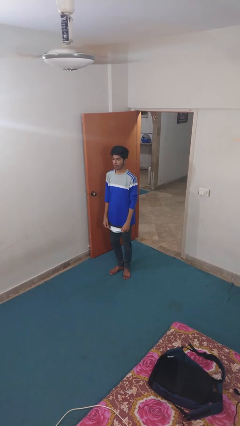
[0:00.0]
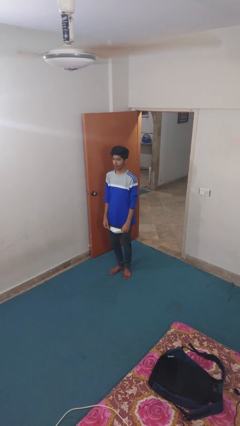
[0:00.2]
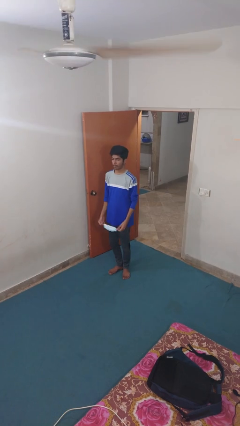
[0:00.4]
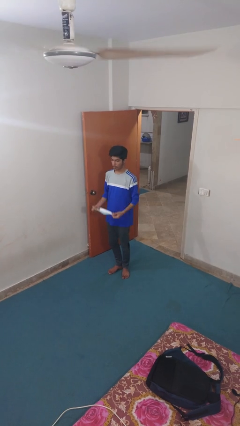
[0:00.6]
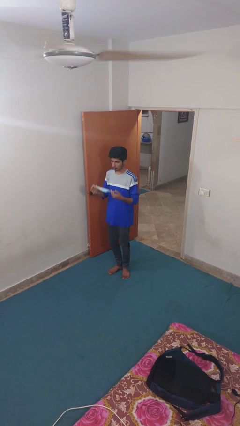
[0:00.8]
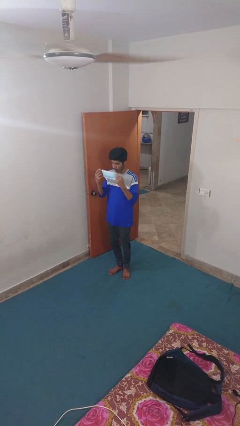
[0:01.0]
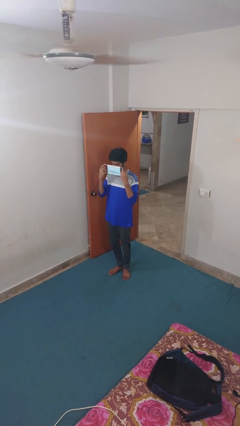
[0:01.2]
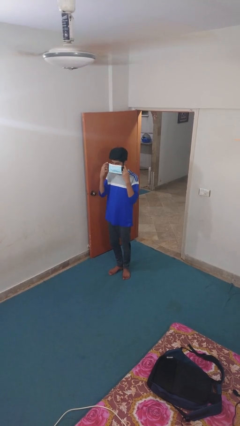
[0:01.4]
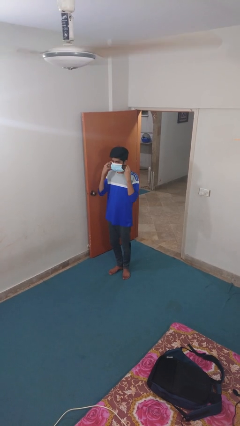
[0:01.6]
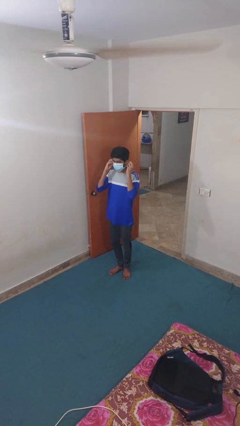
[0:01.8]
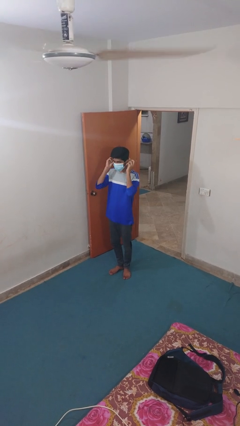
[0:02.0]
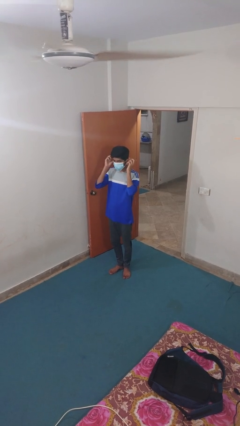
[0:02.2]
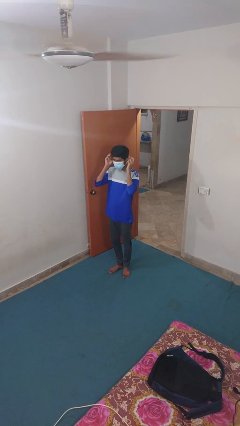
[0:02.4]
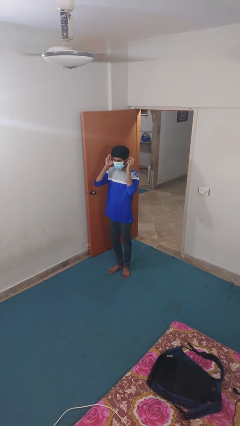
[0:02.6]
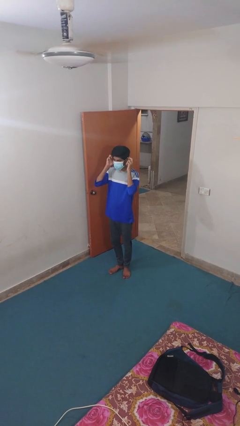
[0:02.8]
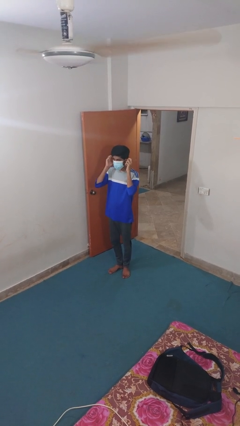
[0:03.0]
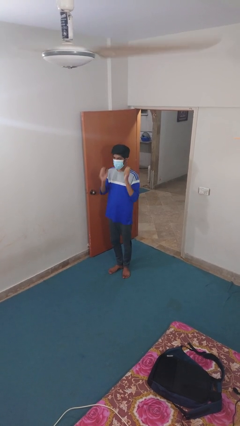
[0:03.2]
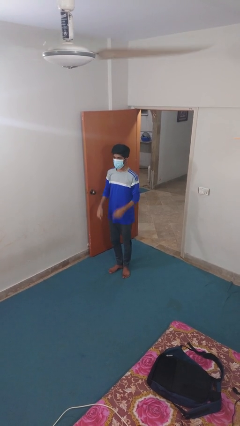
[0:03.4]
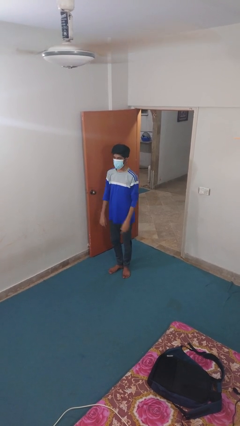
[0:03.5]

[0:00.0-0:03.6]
person puts on facemask

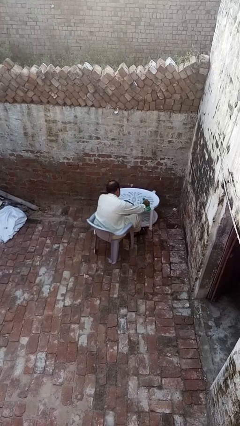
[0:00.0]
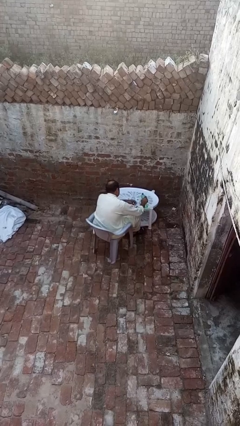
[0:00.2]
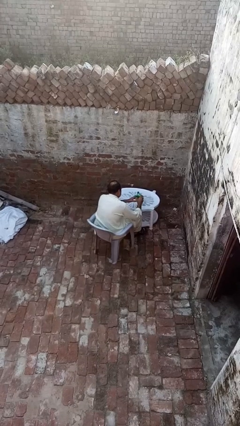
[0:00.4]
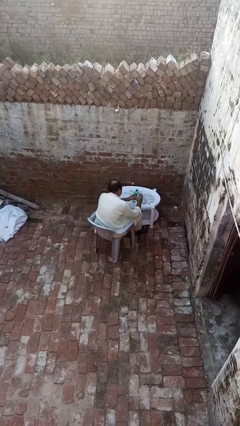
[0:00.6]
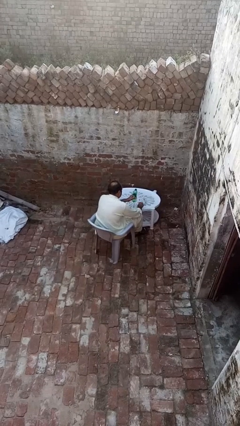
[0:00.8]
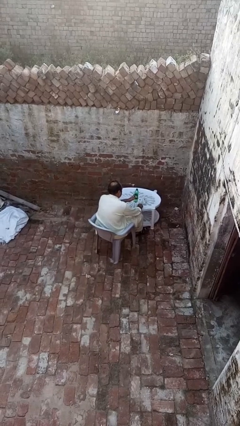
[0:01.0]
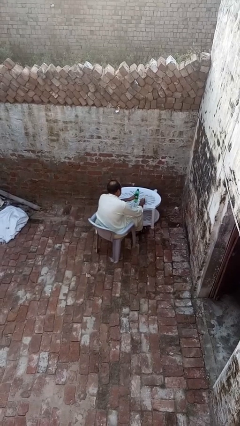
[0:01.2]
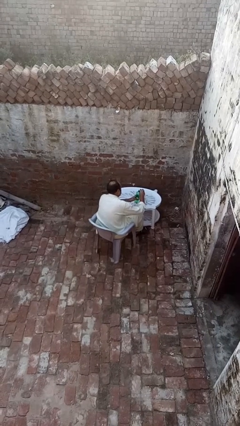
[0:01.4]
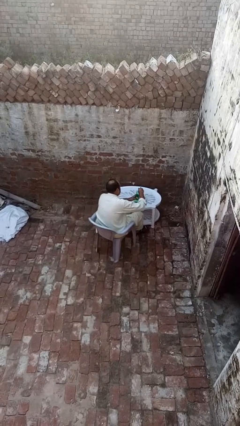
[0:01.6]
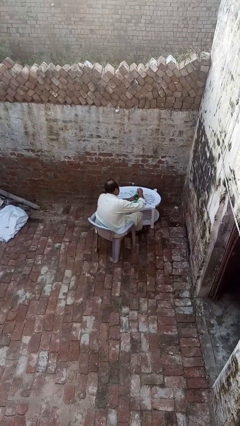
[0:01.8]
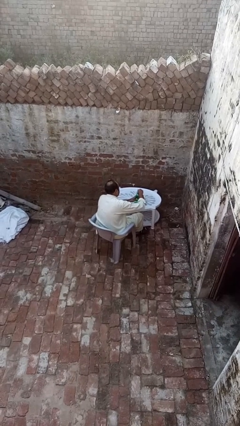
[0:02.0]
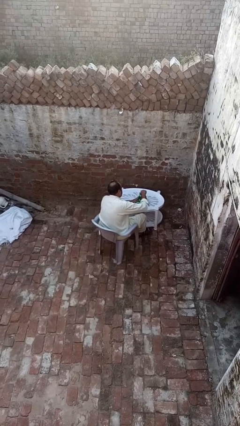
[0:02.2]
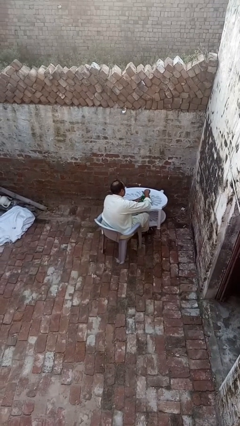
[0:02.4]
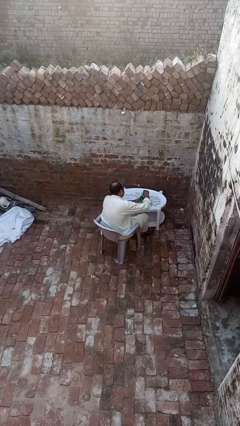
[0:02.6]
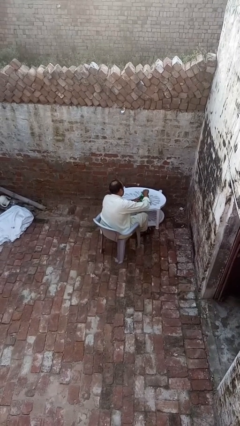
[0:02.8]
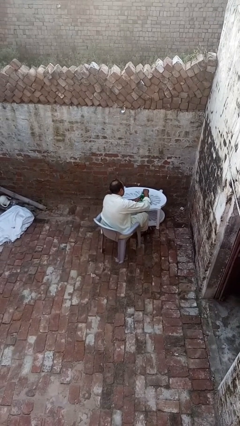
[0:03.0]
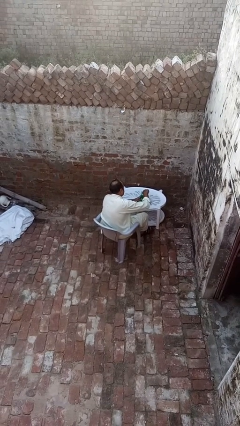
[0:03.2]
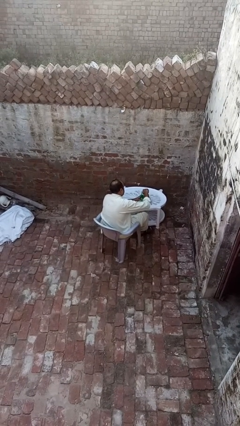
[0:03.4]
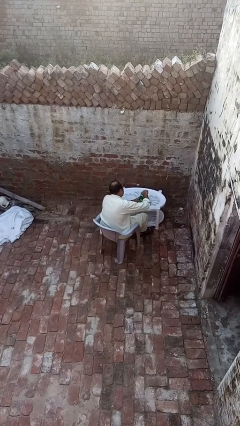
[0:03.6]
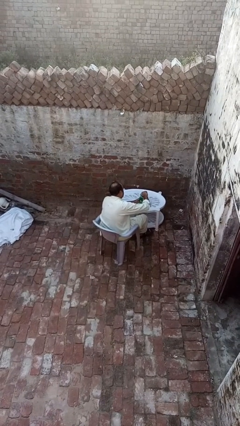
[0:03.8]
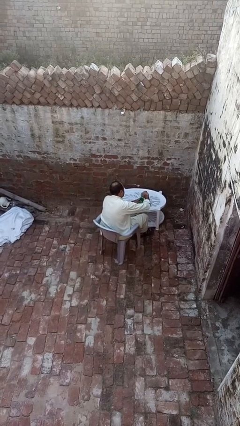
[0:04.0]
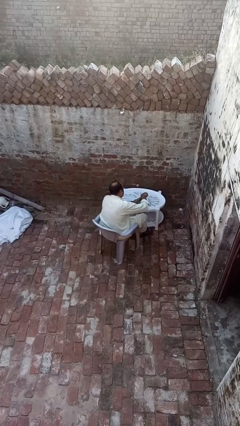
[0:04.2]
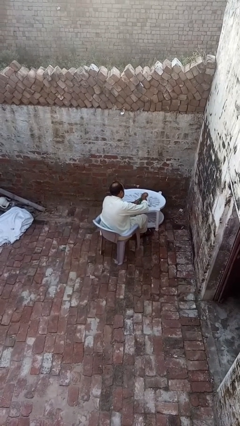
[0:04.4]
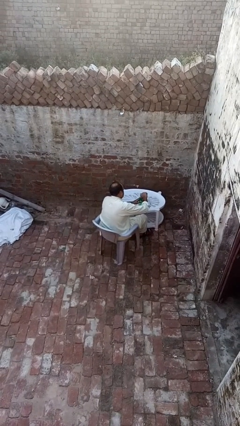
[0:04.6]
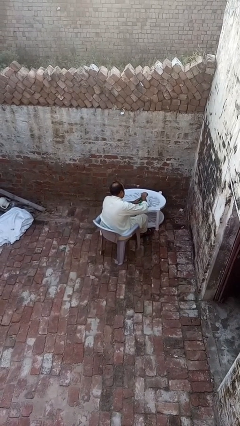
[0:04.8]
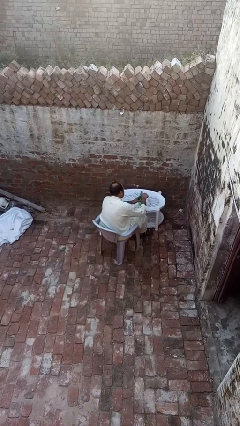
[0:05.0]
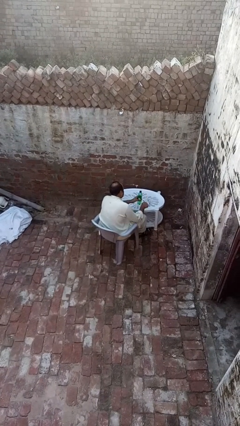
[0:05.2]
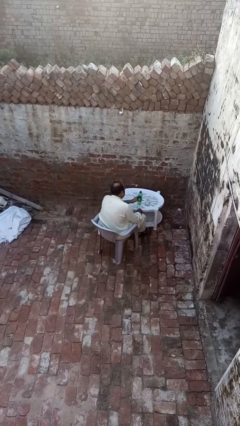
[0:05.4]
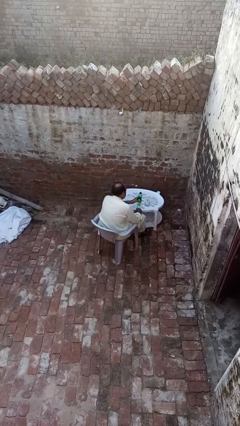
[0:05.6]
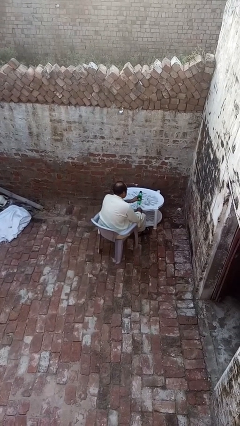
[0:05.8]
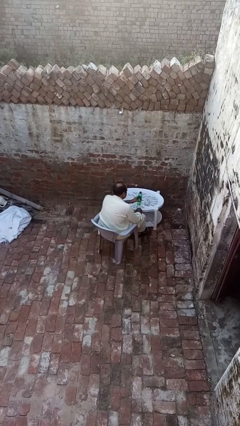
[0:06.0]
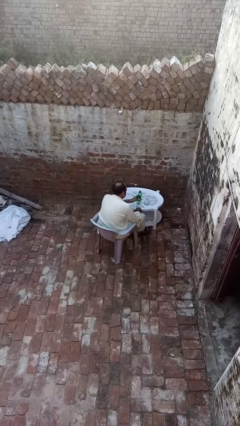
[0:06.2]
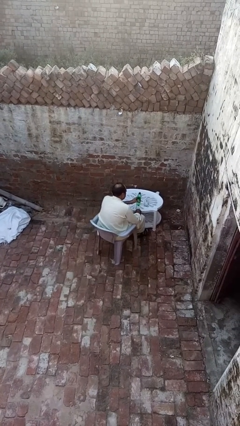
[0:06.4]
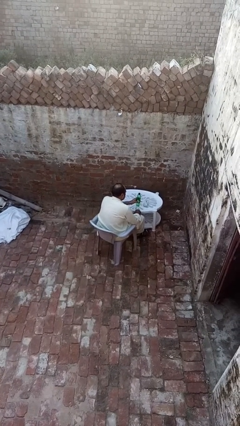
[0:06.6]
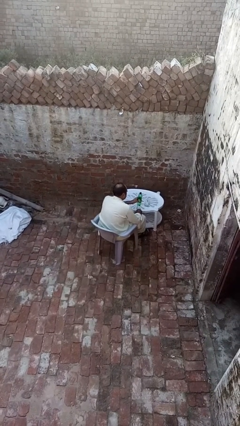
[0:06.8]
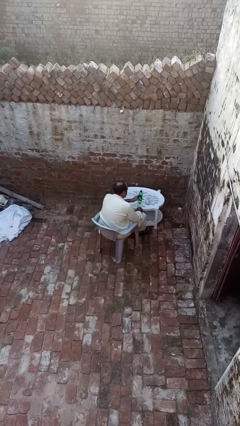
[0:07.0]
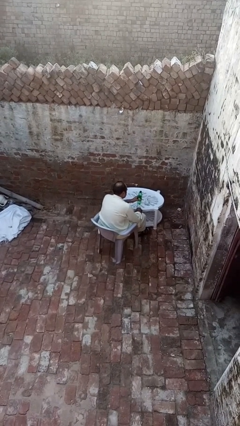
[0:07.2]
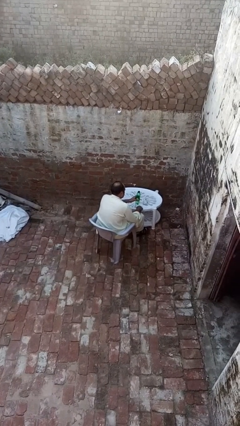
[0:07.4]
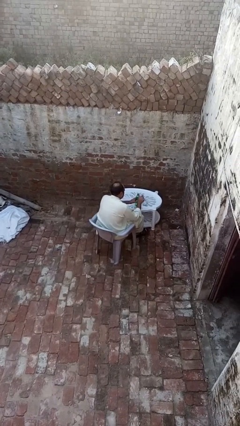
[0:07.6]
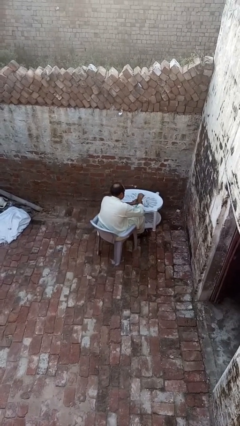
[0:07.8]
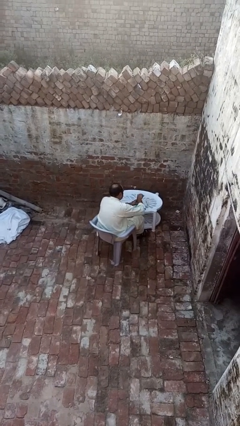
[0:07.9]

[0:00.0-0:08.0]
person screws lid to bottle

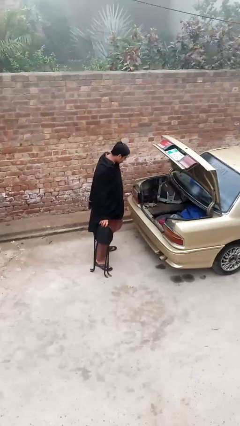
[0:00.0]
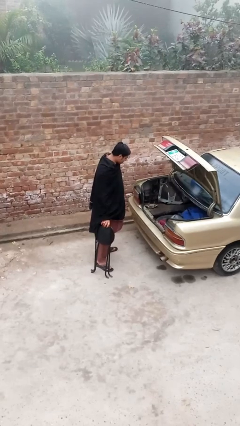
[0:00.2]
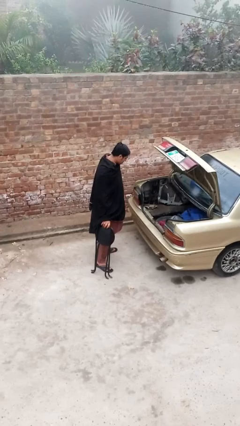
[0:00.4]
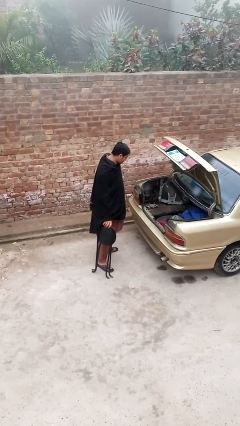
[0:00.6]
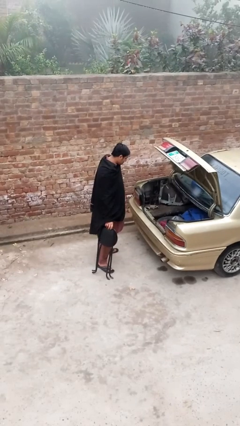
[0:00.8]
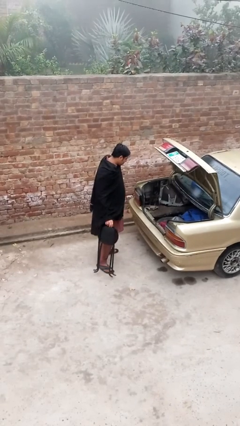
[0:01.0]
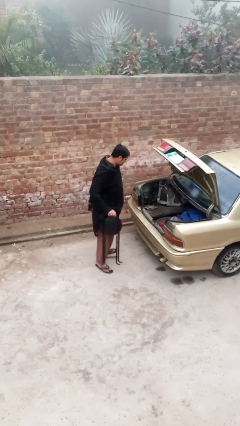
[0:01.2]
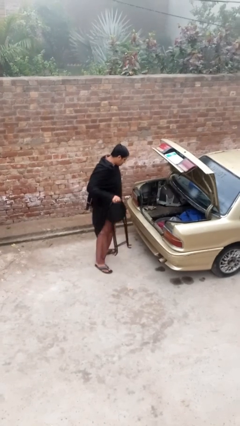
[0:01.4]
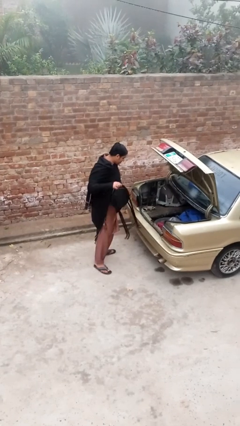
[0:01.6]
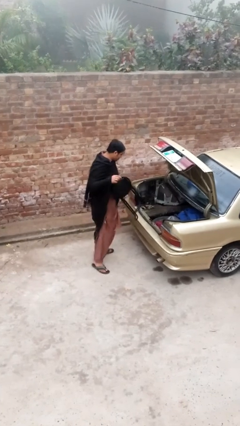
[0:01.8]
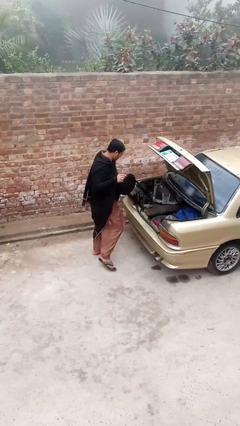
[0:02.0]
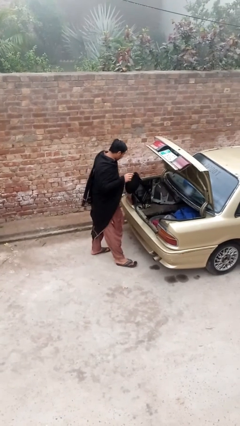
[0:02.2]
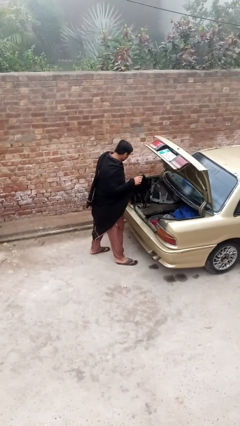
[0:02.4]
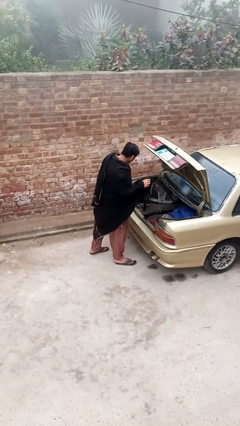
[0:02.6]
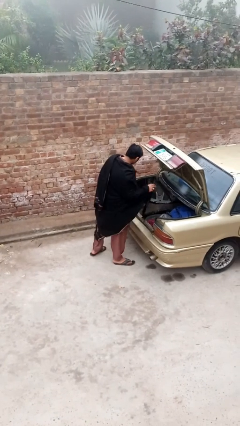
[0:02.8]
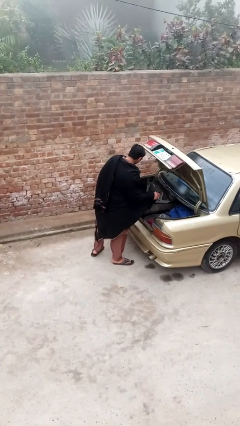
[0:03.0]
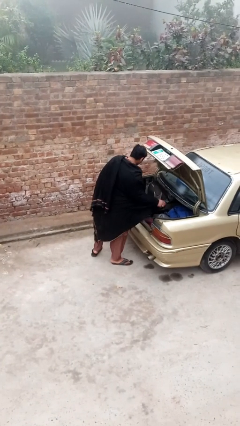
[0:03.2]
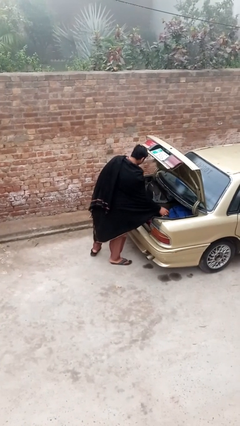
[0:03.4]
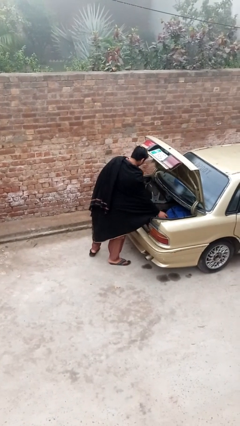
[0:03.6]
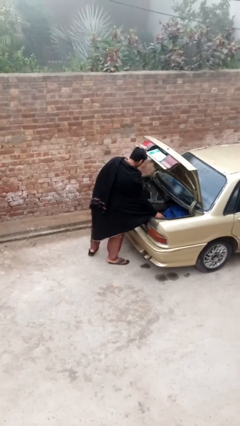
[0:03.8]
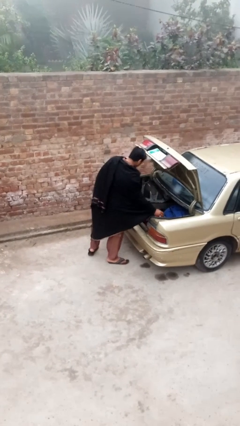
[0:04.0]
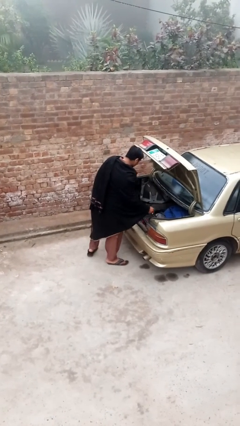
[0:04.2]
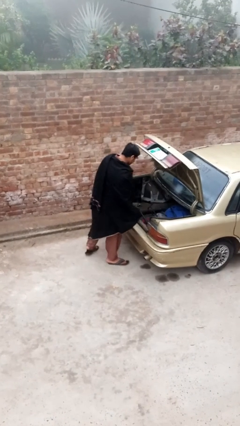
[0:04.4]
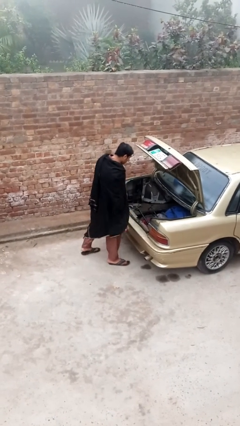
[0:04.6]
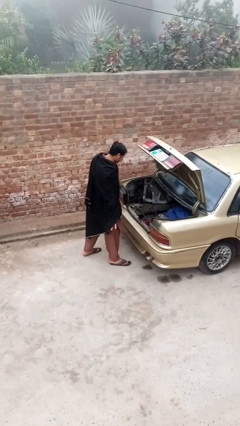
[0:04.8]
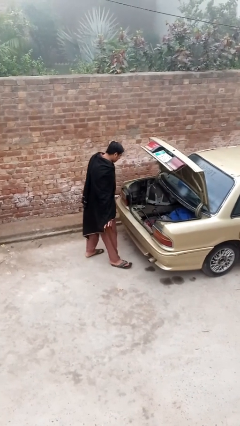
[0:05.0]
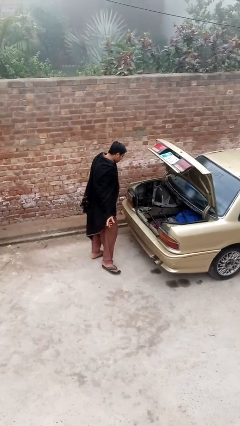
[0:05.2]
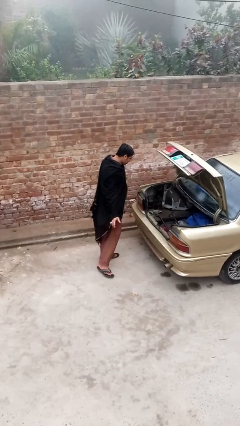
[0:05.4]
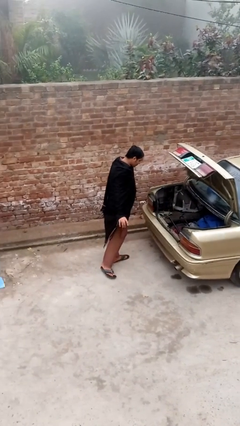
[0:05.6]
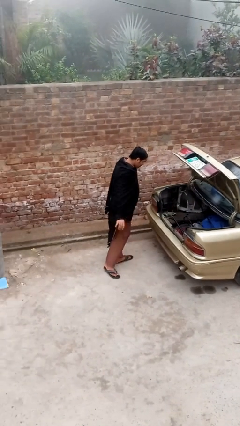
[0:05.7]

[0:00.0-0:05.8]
person loads car

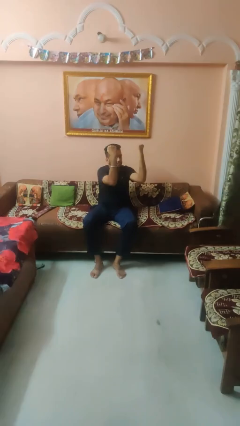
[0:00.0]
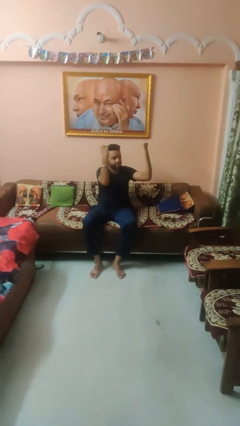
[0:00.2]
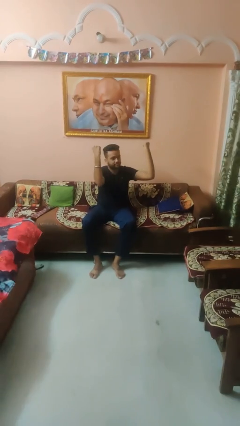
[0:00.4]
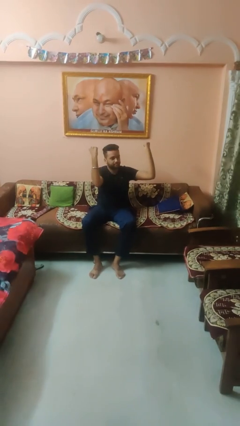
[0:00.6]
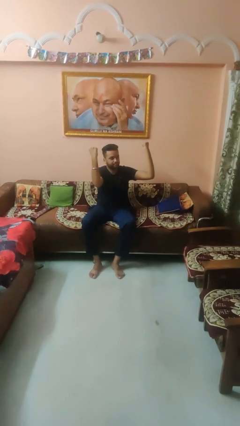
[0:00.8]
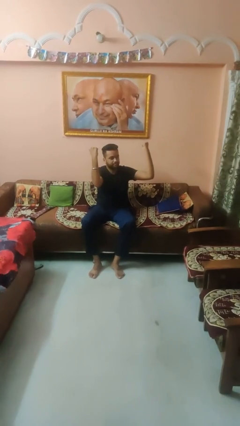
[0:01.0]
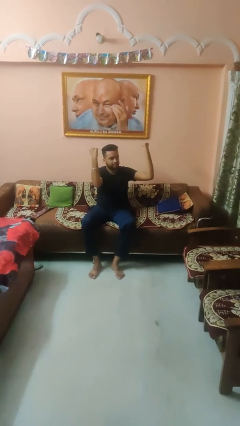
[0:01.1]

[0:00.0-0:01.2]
person gestures zoom in
